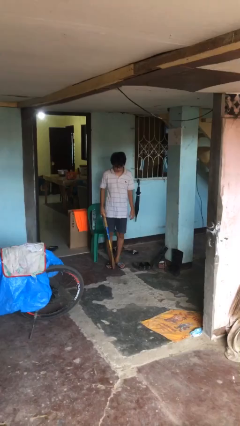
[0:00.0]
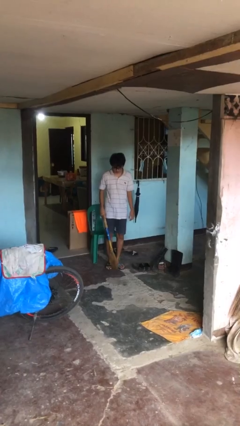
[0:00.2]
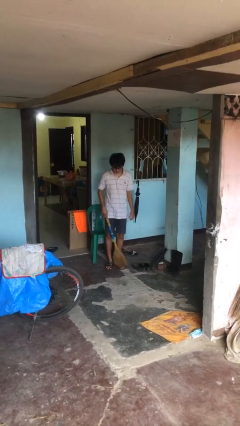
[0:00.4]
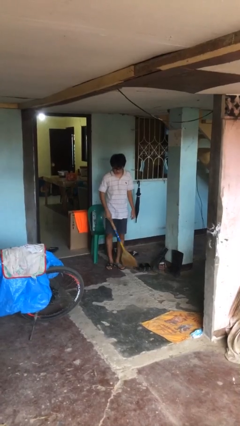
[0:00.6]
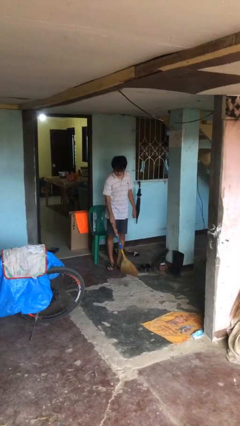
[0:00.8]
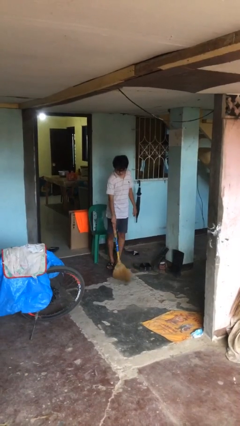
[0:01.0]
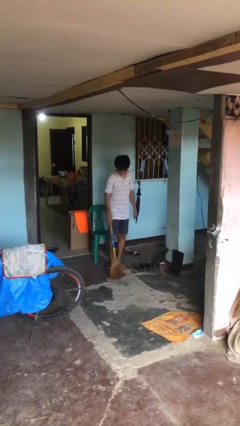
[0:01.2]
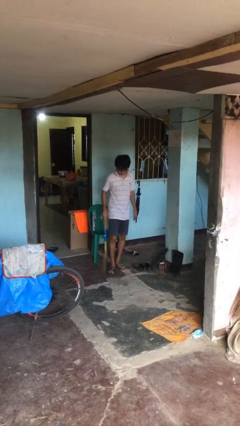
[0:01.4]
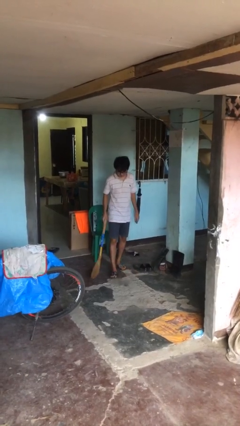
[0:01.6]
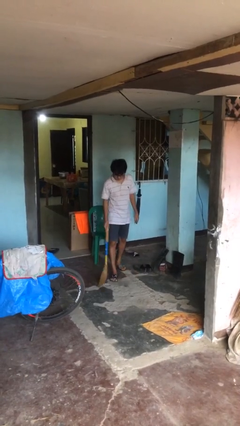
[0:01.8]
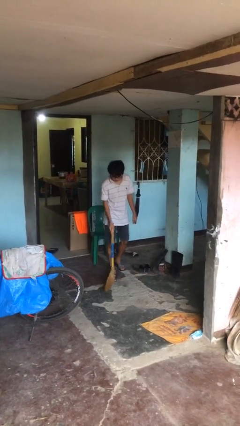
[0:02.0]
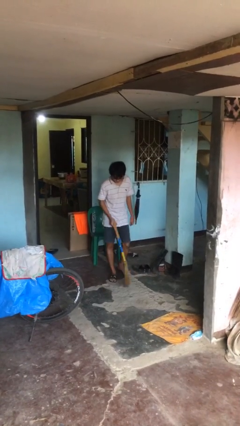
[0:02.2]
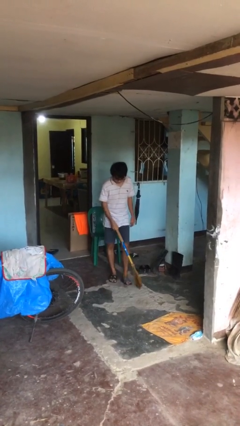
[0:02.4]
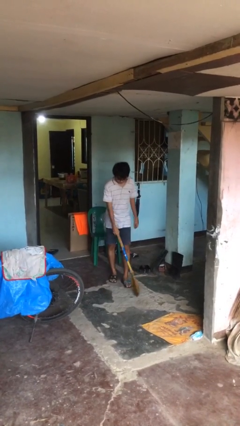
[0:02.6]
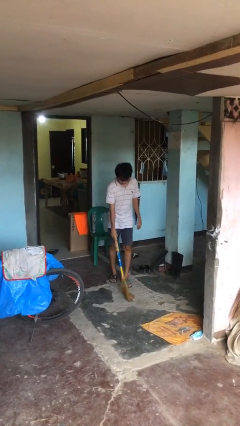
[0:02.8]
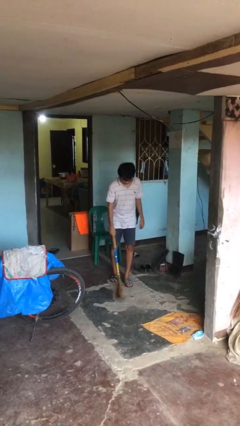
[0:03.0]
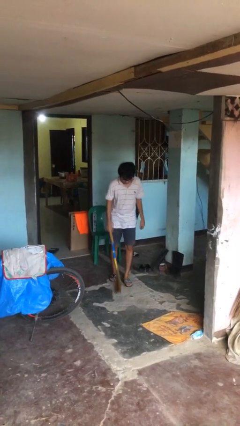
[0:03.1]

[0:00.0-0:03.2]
person sweeps floor

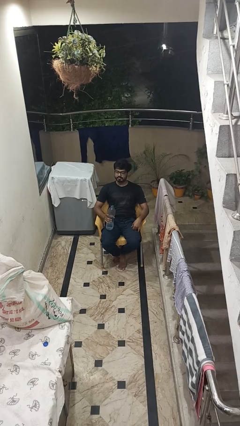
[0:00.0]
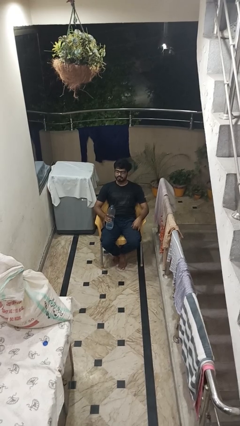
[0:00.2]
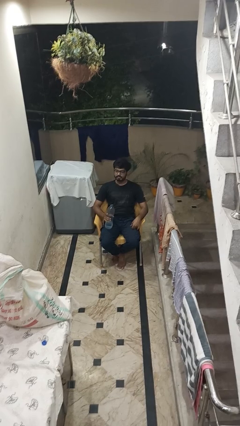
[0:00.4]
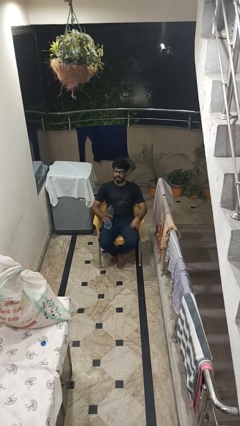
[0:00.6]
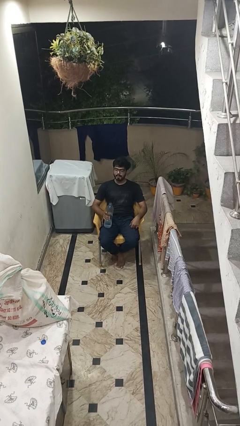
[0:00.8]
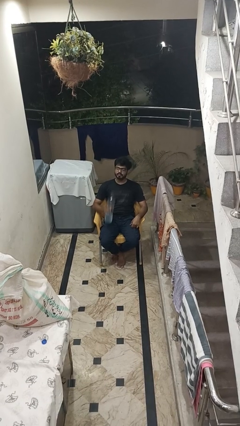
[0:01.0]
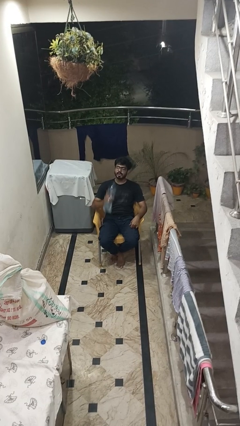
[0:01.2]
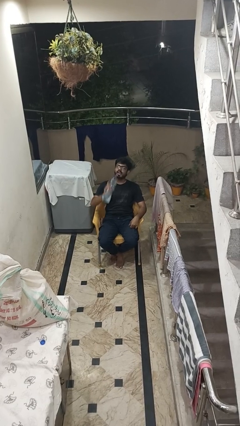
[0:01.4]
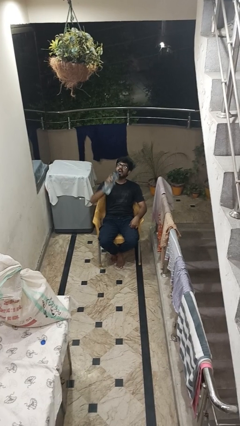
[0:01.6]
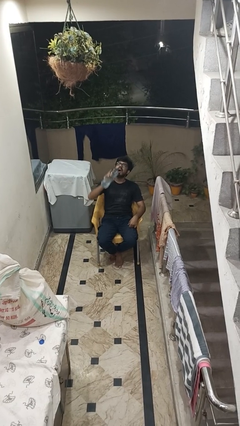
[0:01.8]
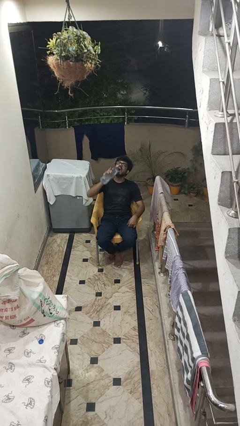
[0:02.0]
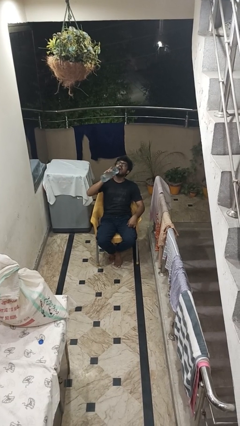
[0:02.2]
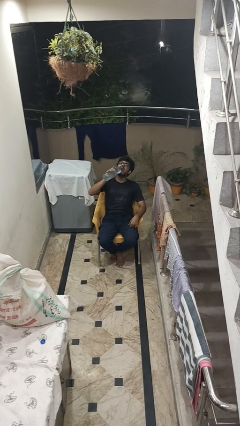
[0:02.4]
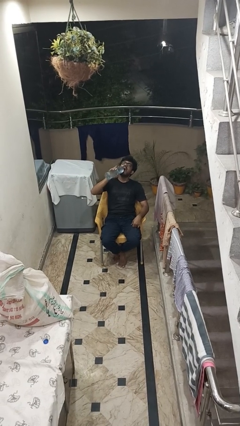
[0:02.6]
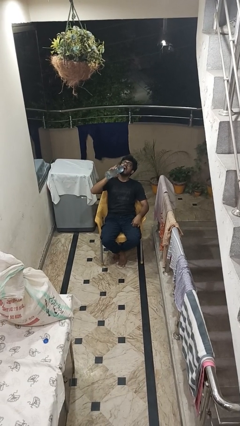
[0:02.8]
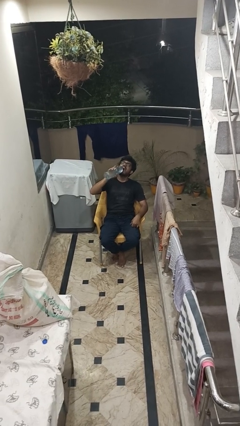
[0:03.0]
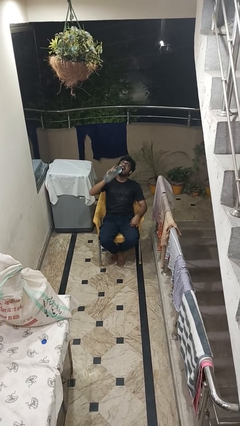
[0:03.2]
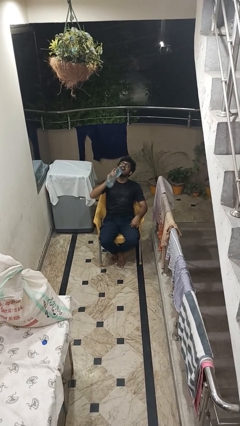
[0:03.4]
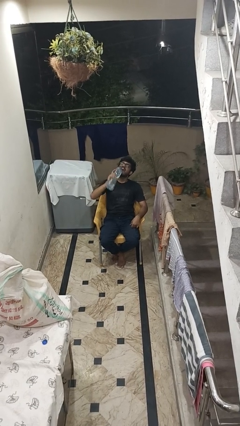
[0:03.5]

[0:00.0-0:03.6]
person drinks from bottle

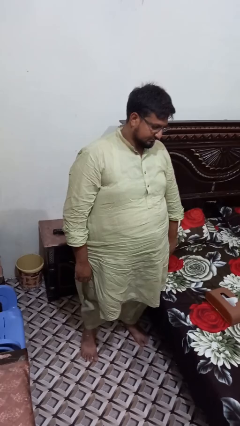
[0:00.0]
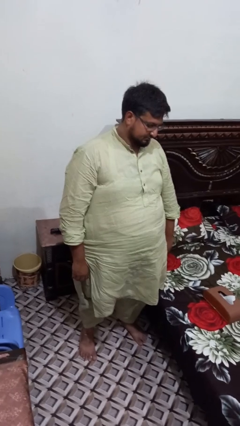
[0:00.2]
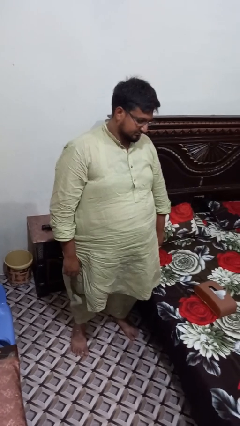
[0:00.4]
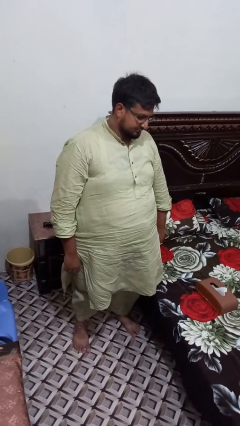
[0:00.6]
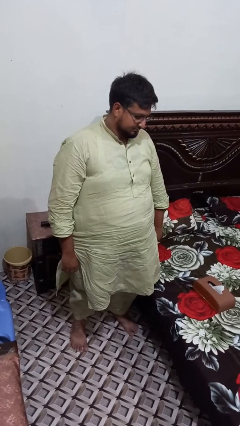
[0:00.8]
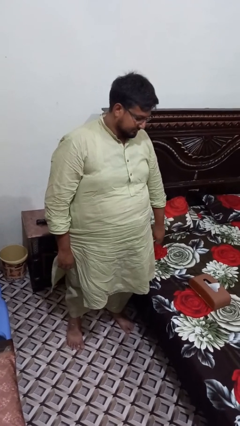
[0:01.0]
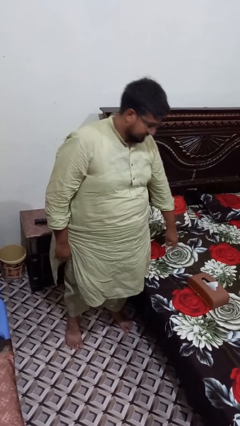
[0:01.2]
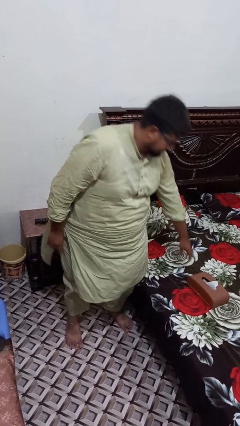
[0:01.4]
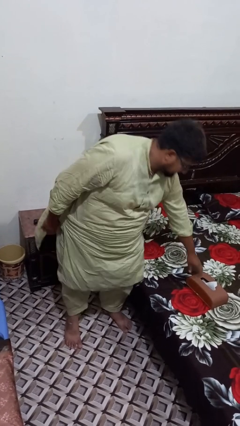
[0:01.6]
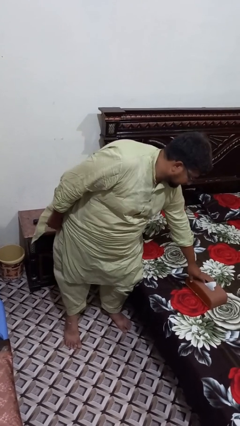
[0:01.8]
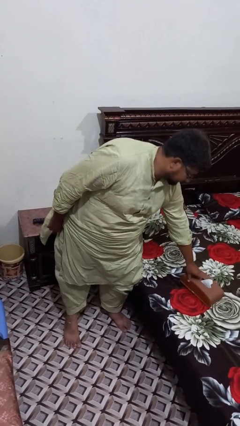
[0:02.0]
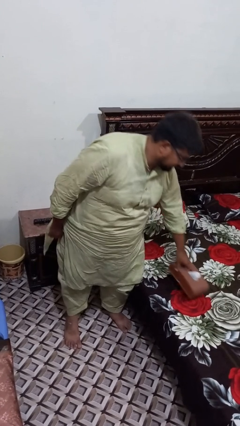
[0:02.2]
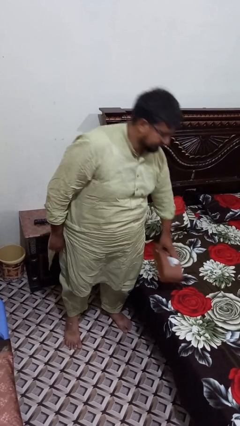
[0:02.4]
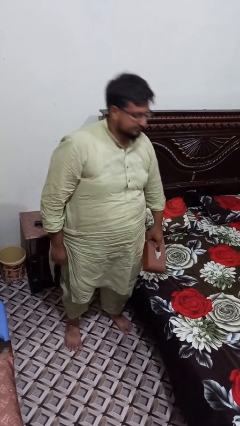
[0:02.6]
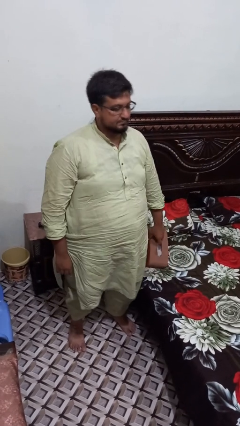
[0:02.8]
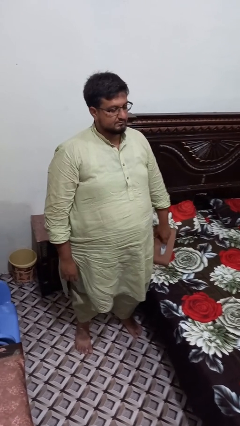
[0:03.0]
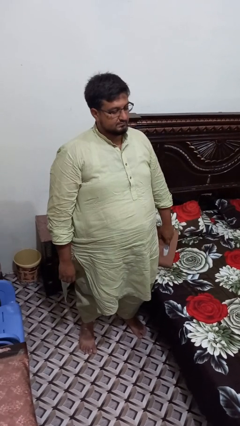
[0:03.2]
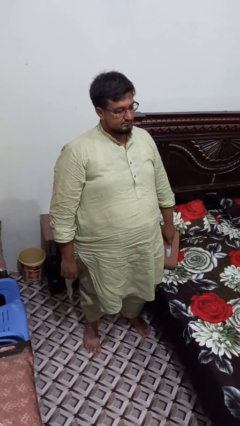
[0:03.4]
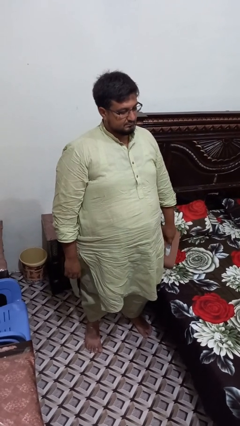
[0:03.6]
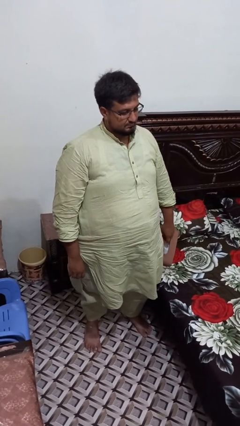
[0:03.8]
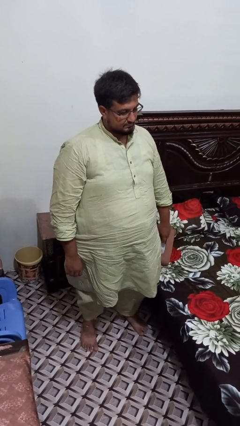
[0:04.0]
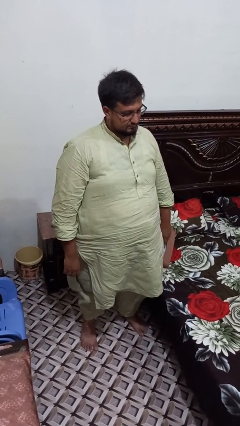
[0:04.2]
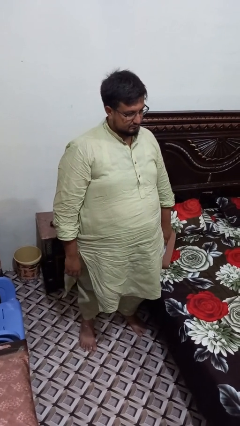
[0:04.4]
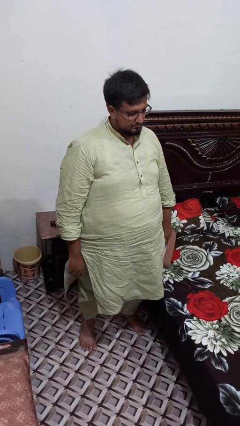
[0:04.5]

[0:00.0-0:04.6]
person picks up object from bed

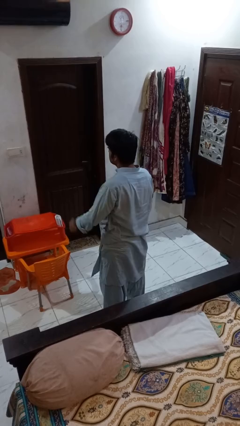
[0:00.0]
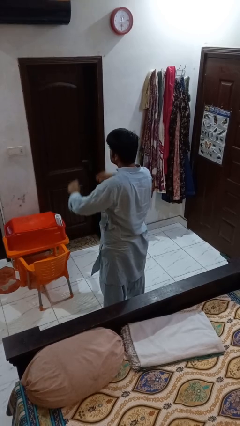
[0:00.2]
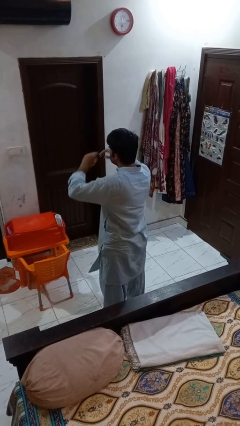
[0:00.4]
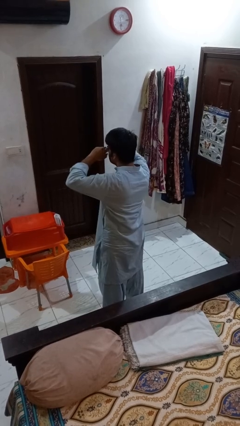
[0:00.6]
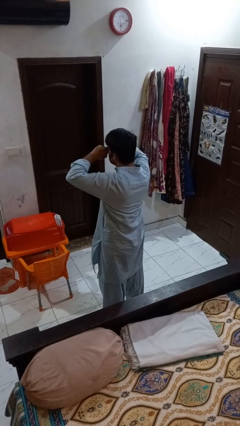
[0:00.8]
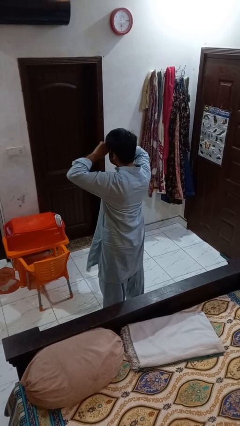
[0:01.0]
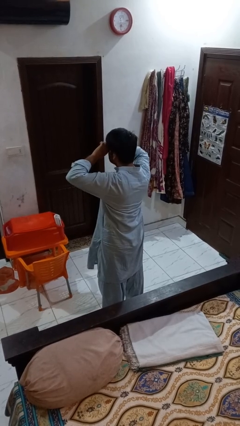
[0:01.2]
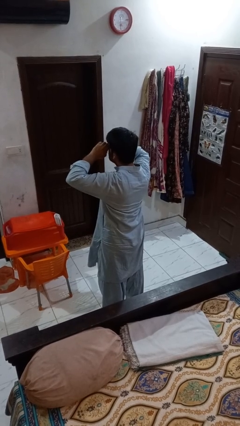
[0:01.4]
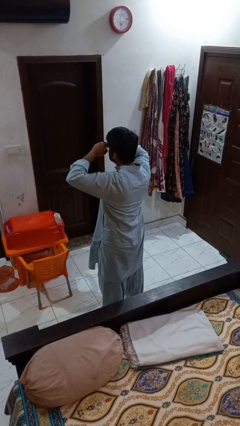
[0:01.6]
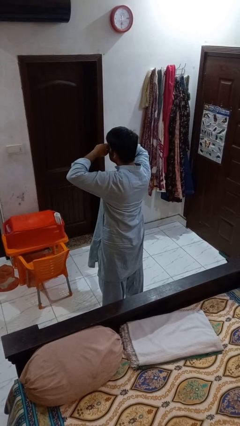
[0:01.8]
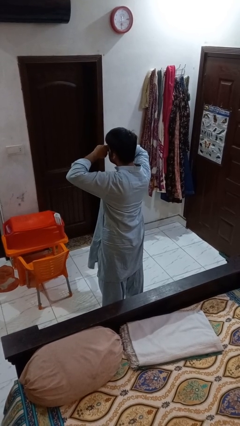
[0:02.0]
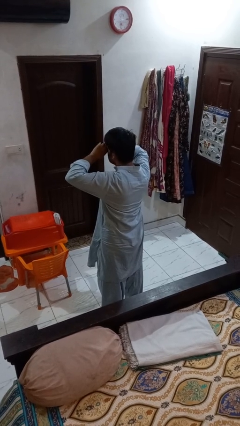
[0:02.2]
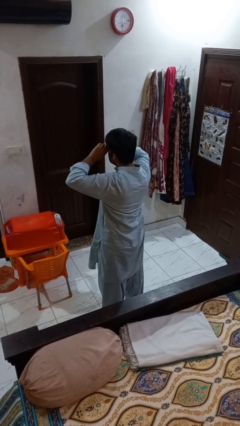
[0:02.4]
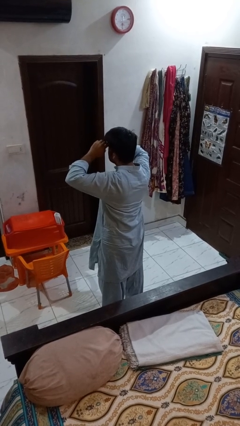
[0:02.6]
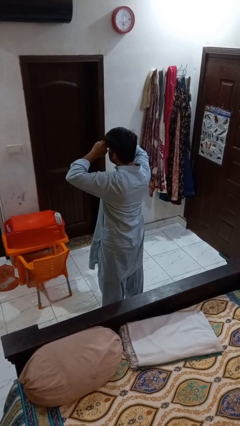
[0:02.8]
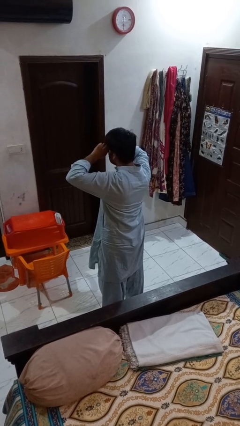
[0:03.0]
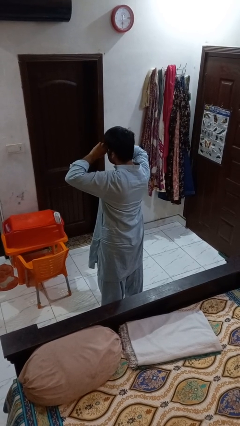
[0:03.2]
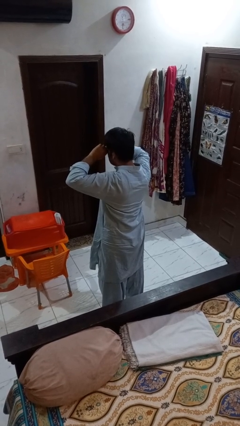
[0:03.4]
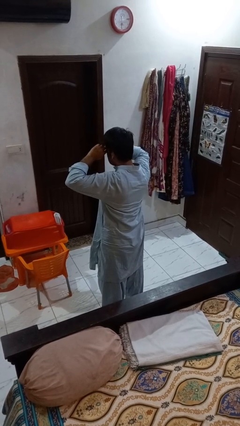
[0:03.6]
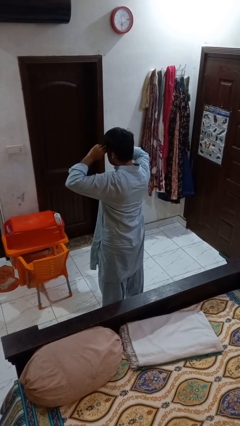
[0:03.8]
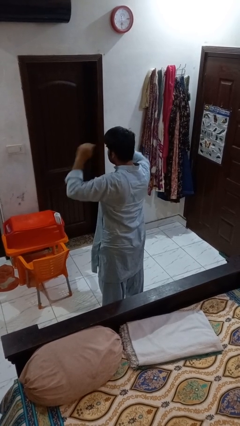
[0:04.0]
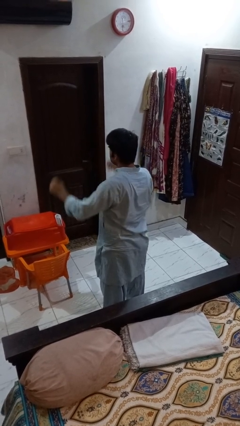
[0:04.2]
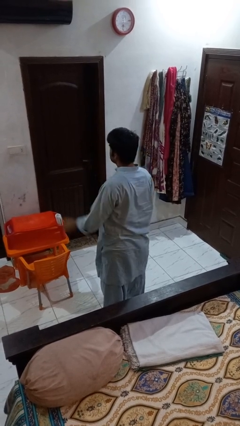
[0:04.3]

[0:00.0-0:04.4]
person rubs eyes

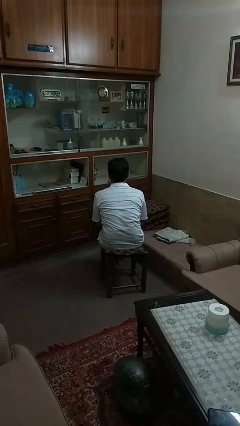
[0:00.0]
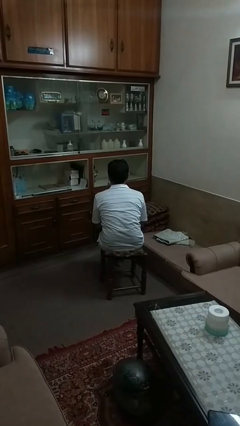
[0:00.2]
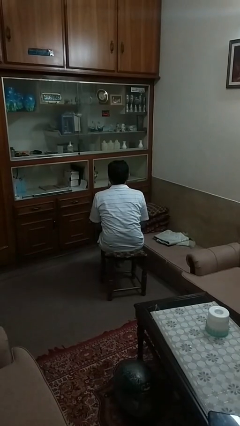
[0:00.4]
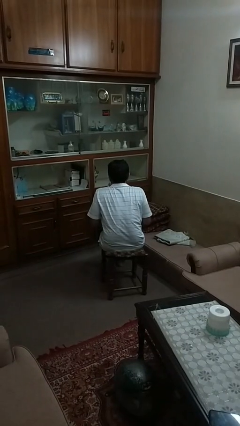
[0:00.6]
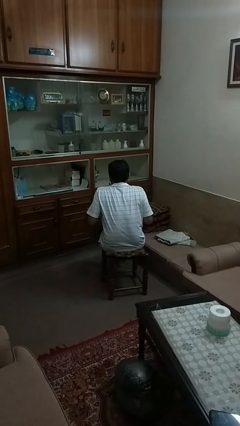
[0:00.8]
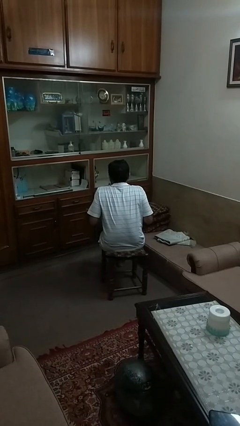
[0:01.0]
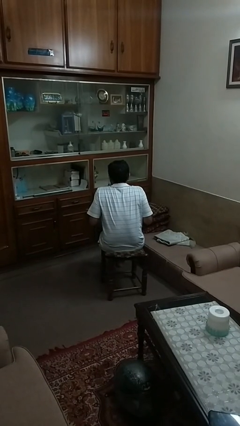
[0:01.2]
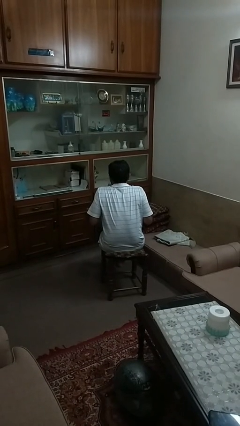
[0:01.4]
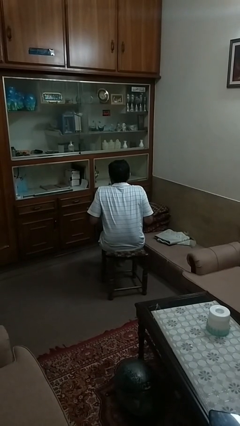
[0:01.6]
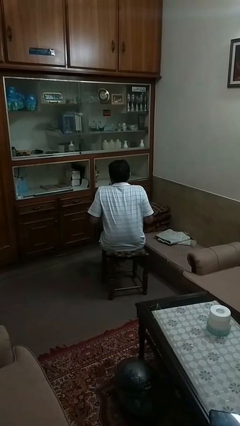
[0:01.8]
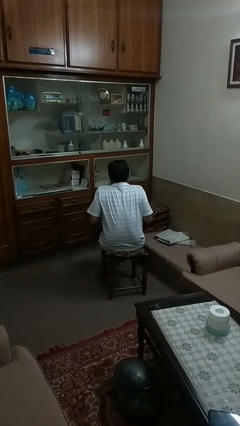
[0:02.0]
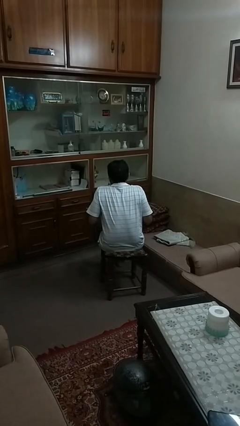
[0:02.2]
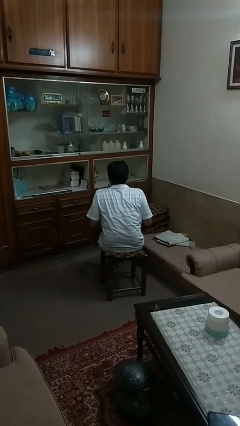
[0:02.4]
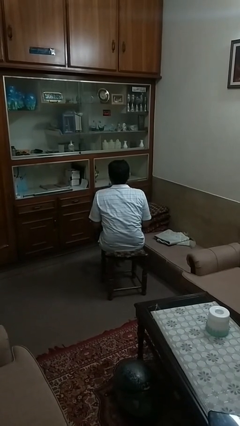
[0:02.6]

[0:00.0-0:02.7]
person shrugs
